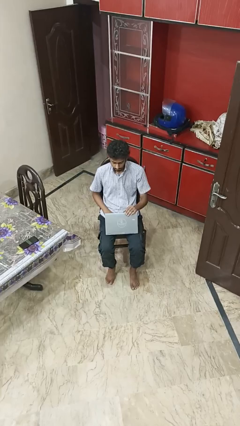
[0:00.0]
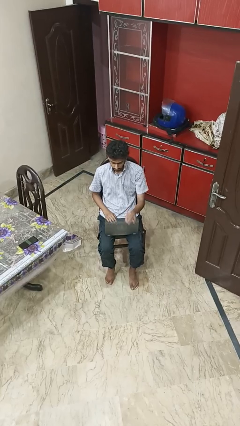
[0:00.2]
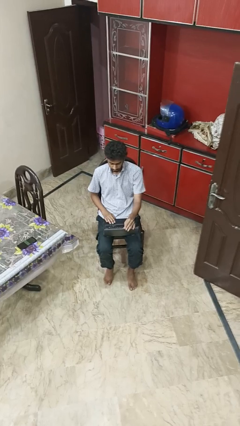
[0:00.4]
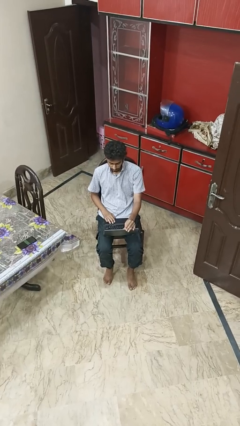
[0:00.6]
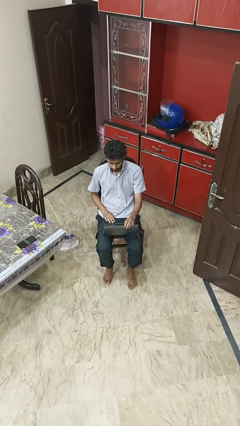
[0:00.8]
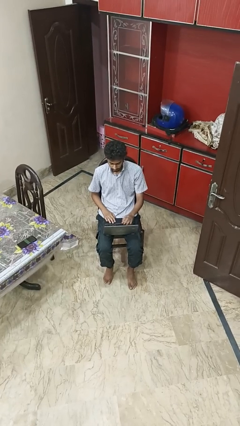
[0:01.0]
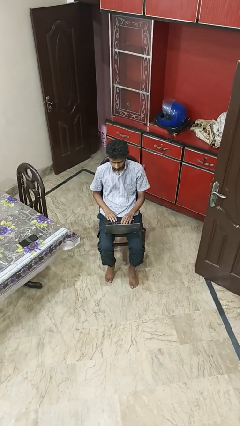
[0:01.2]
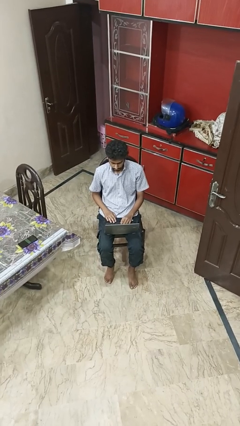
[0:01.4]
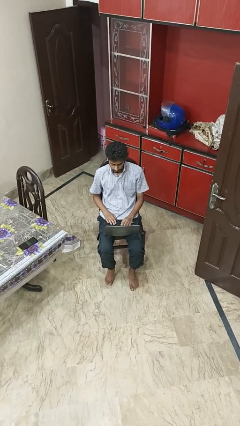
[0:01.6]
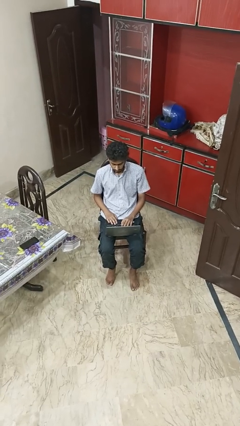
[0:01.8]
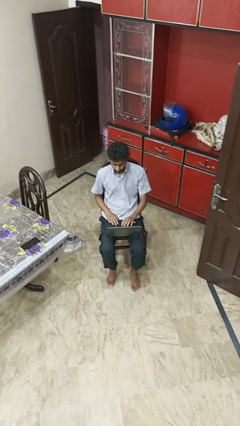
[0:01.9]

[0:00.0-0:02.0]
person opens laptop

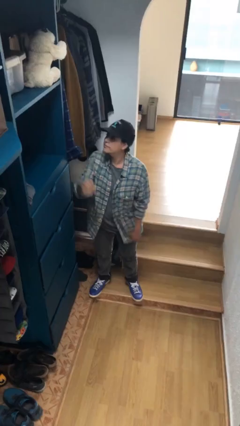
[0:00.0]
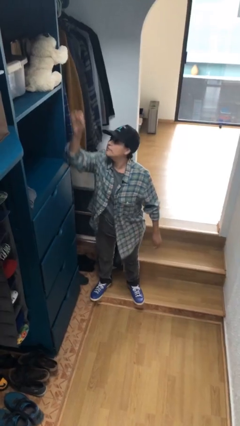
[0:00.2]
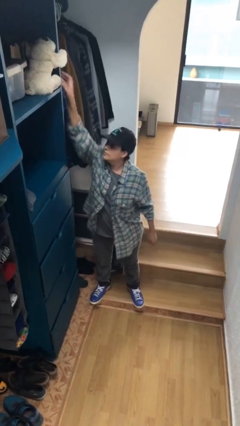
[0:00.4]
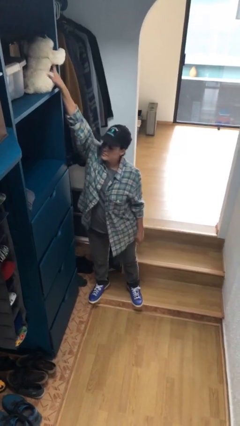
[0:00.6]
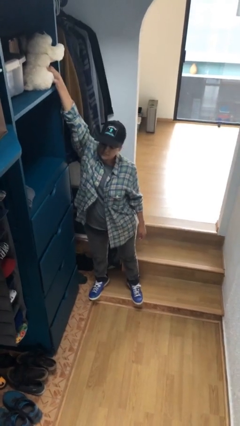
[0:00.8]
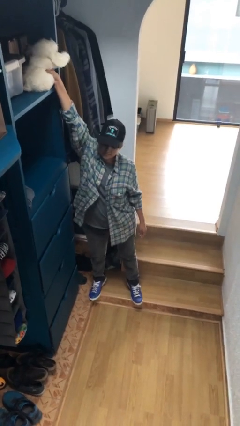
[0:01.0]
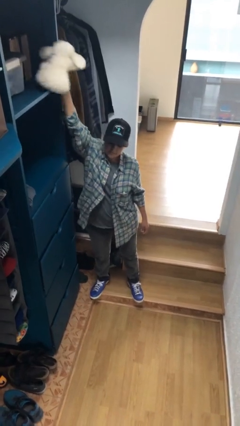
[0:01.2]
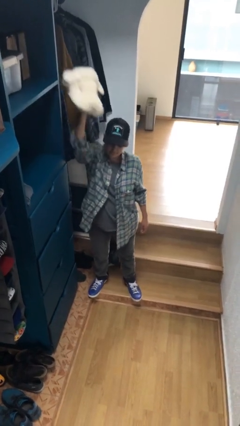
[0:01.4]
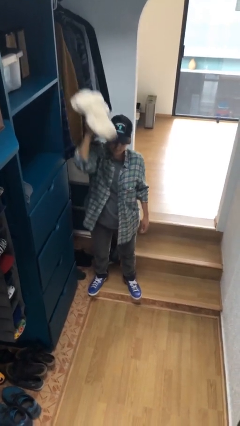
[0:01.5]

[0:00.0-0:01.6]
person picks up object from shelf

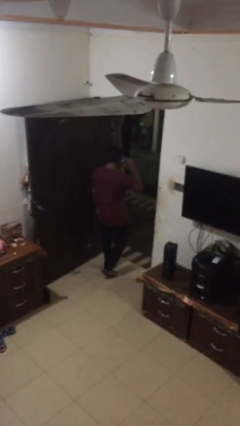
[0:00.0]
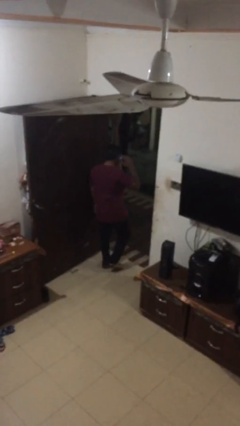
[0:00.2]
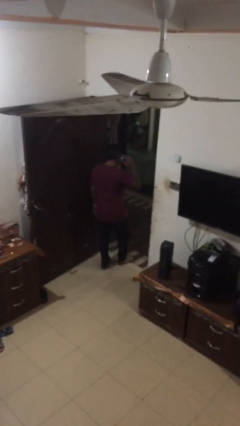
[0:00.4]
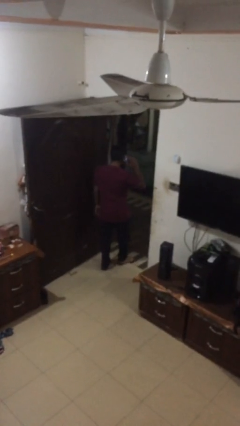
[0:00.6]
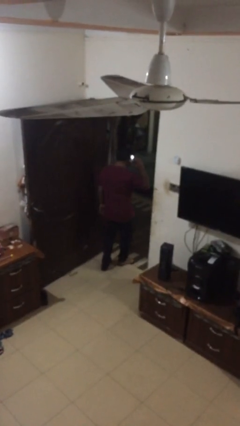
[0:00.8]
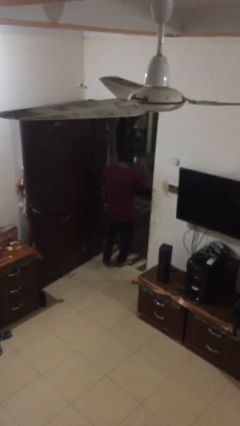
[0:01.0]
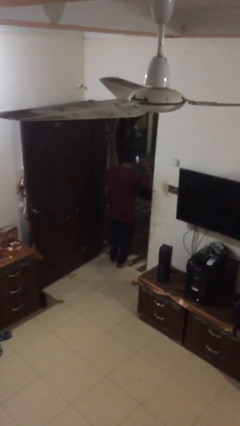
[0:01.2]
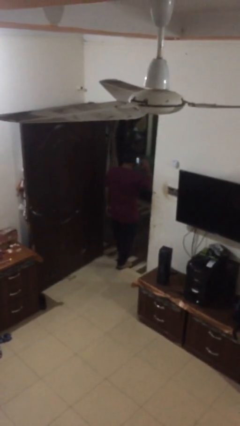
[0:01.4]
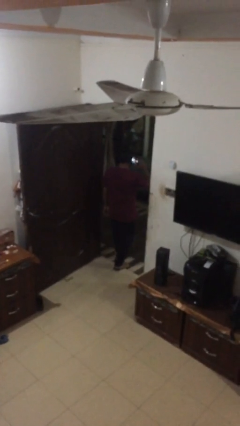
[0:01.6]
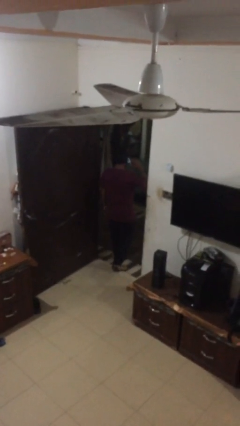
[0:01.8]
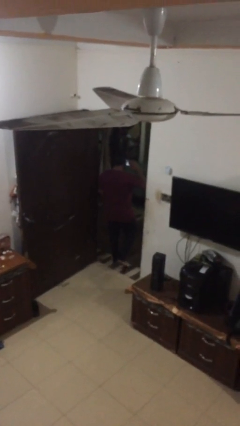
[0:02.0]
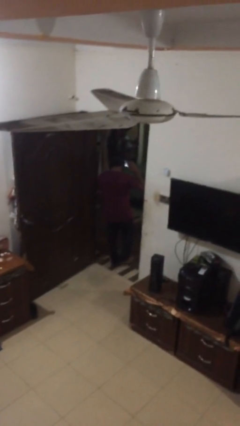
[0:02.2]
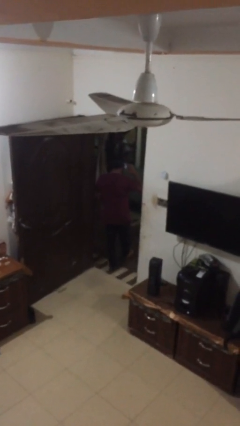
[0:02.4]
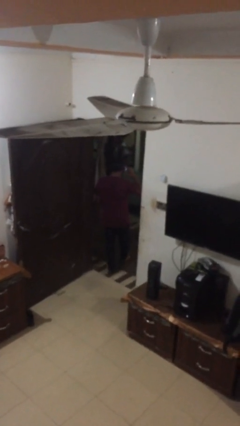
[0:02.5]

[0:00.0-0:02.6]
person exits scene through structure

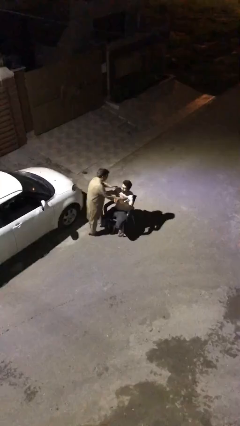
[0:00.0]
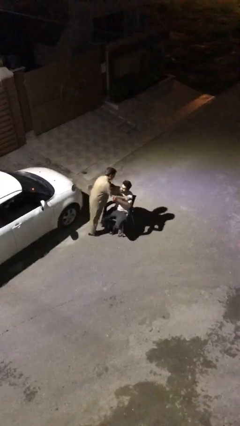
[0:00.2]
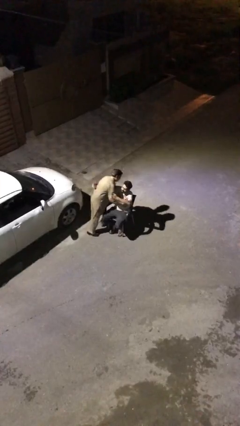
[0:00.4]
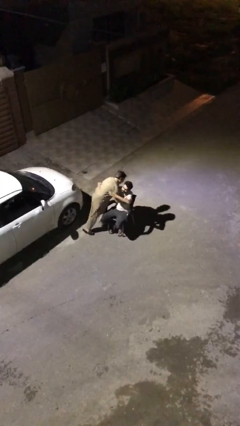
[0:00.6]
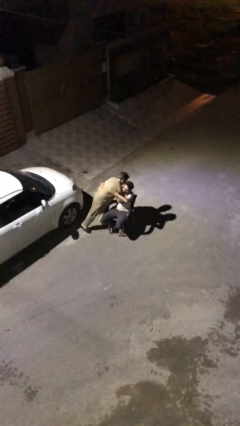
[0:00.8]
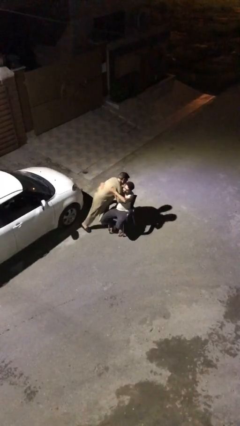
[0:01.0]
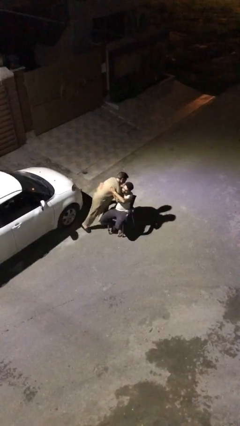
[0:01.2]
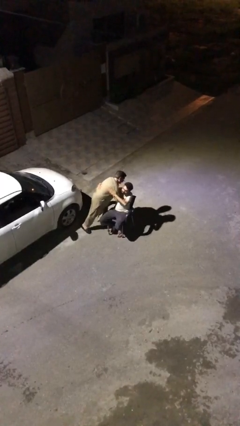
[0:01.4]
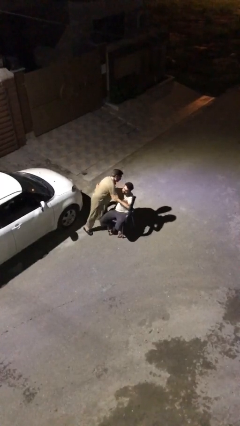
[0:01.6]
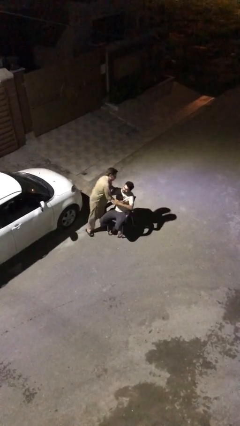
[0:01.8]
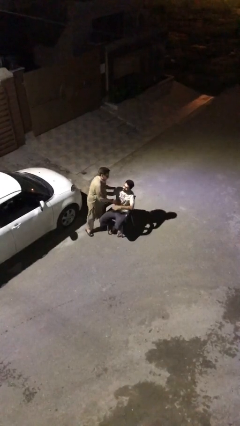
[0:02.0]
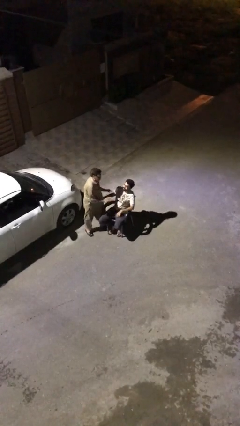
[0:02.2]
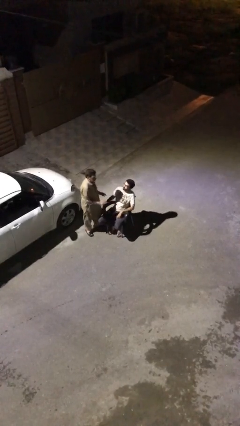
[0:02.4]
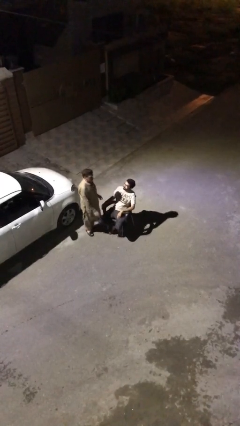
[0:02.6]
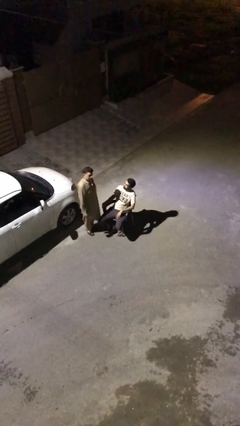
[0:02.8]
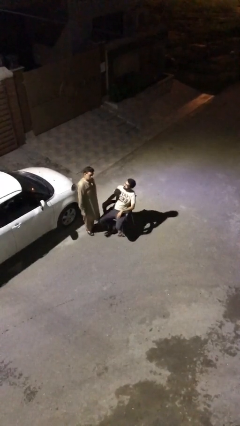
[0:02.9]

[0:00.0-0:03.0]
person embraces person

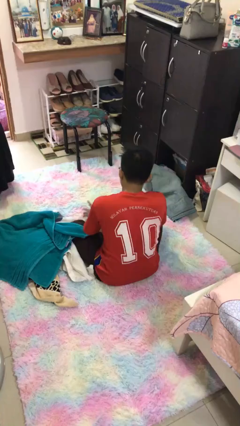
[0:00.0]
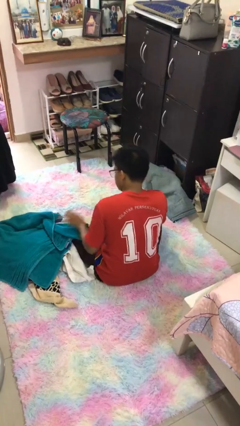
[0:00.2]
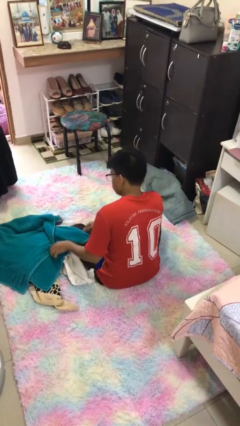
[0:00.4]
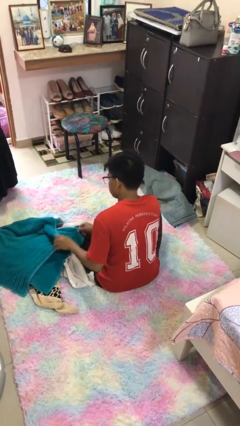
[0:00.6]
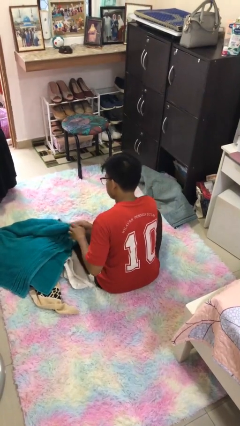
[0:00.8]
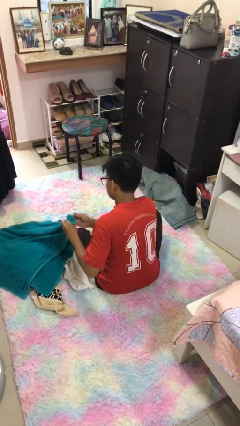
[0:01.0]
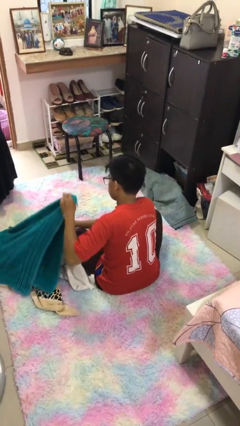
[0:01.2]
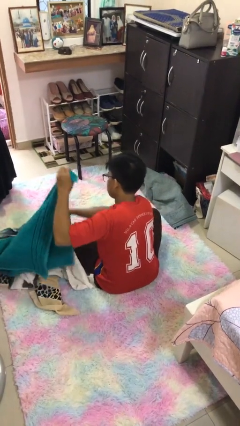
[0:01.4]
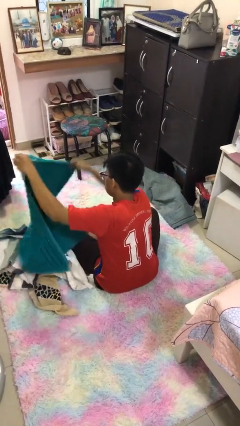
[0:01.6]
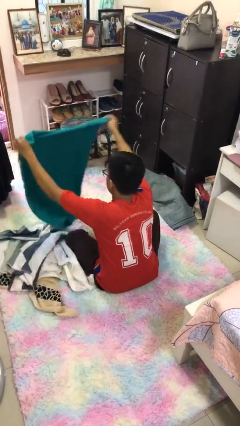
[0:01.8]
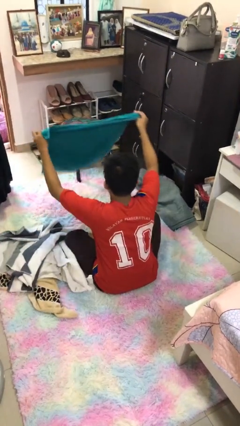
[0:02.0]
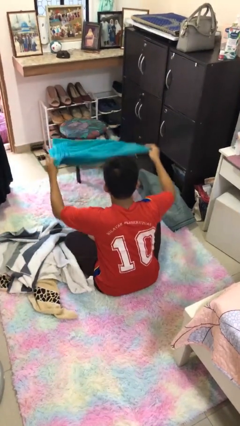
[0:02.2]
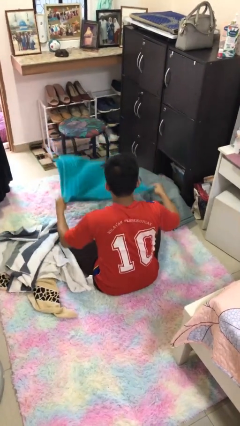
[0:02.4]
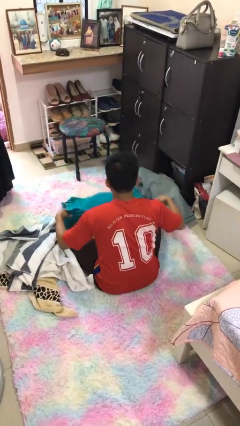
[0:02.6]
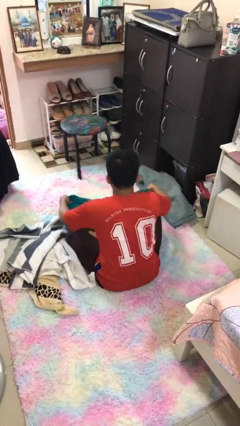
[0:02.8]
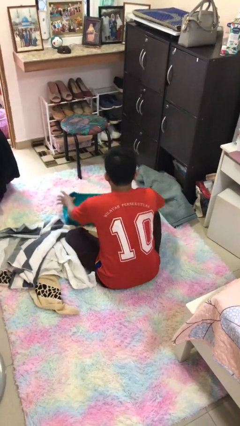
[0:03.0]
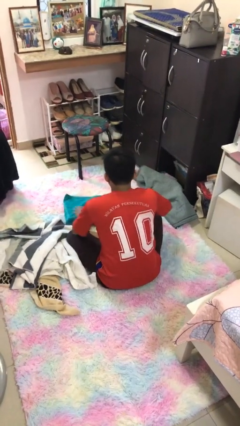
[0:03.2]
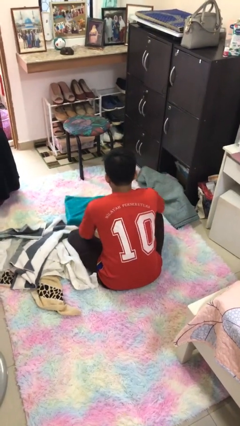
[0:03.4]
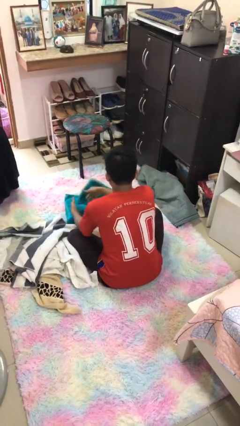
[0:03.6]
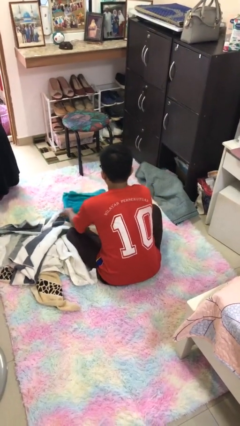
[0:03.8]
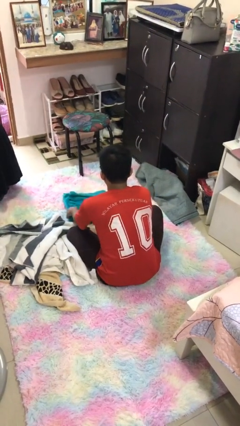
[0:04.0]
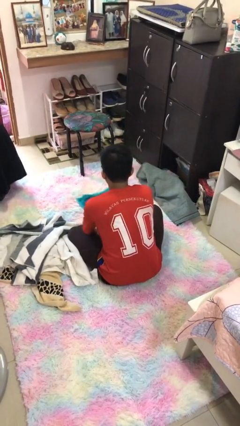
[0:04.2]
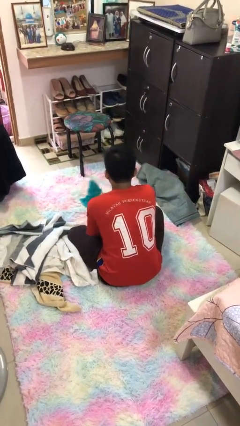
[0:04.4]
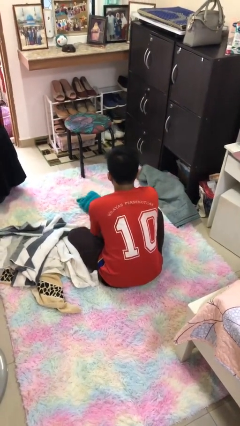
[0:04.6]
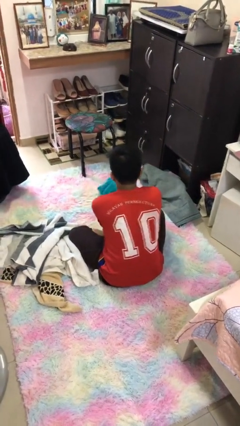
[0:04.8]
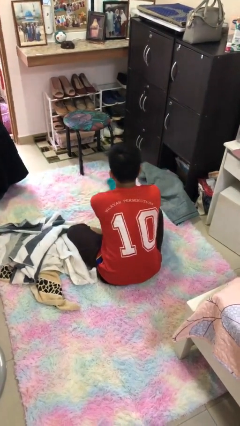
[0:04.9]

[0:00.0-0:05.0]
person folds towel

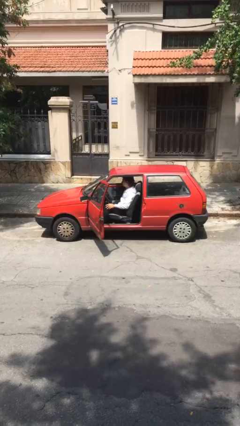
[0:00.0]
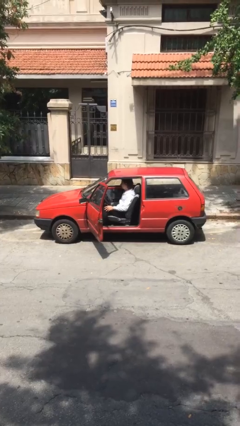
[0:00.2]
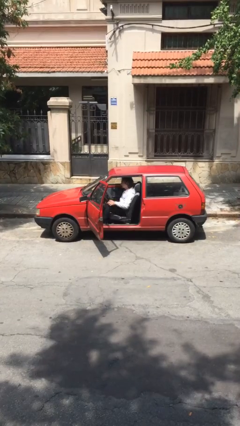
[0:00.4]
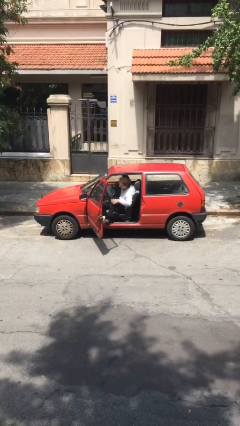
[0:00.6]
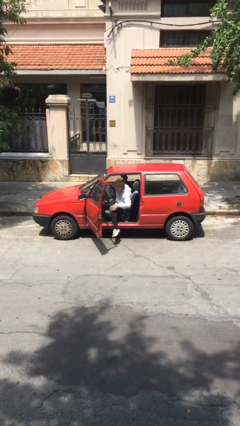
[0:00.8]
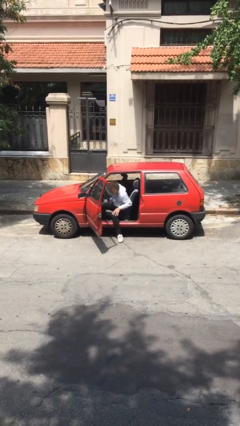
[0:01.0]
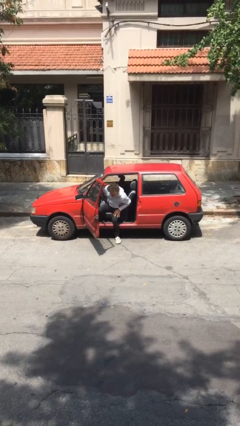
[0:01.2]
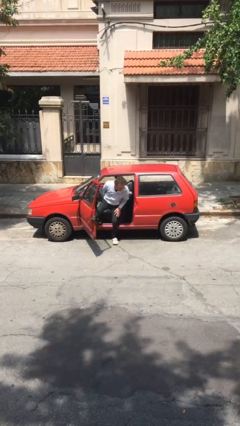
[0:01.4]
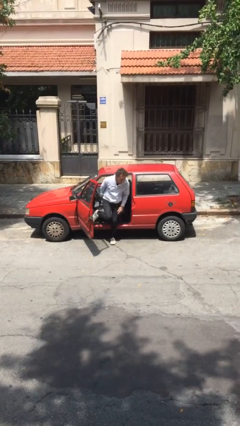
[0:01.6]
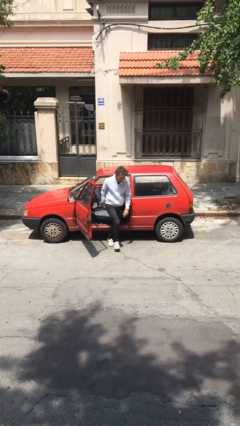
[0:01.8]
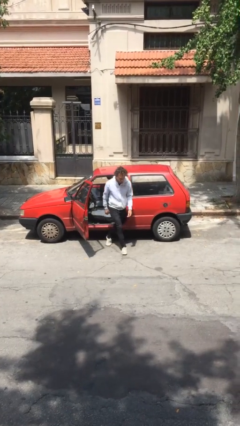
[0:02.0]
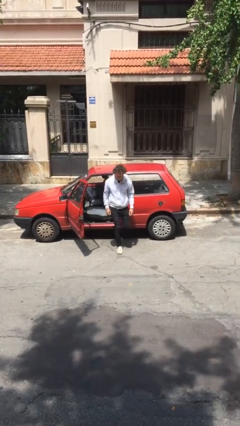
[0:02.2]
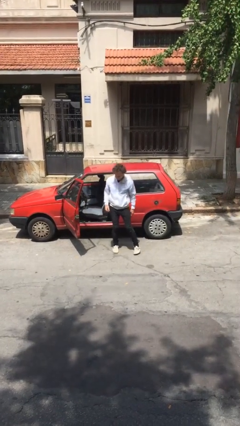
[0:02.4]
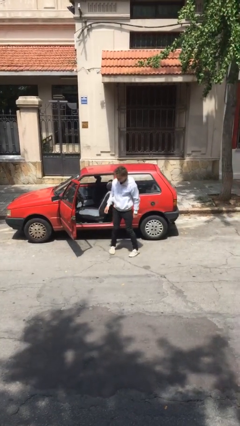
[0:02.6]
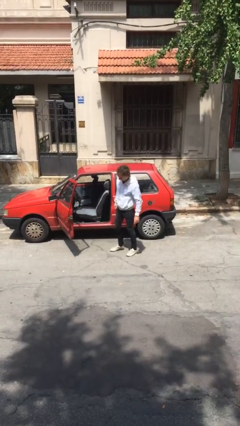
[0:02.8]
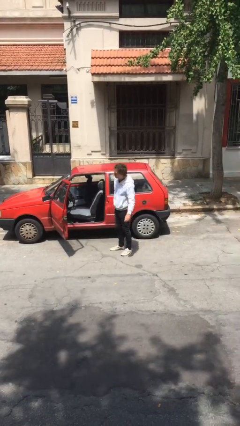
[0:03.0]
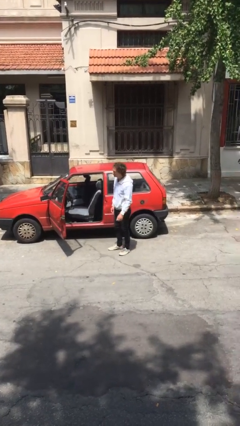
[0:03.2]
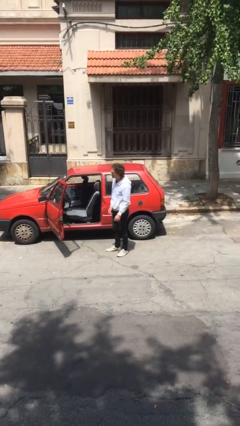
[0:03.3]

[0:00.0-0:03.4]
person exits car
